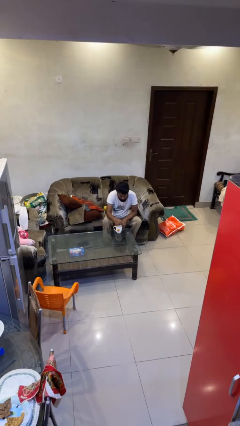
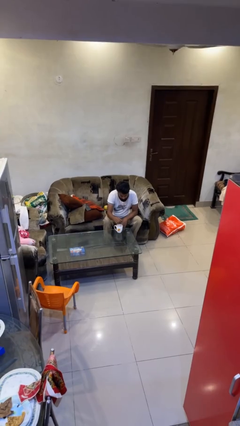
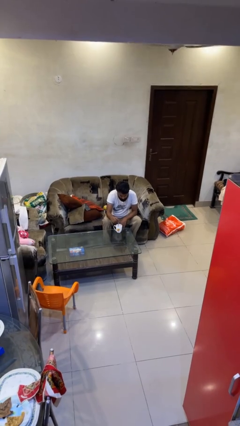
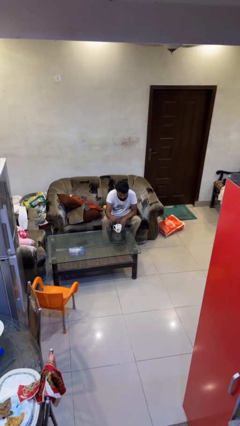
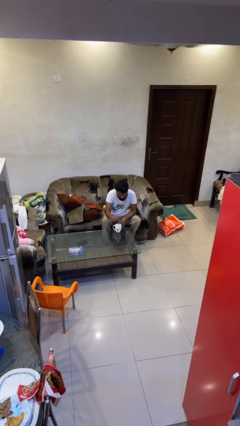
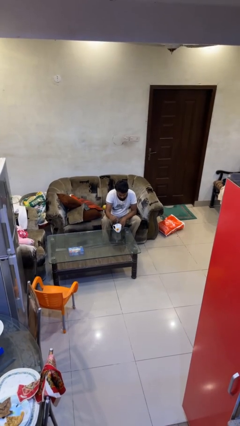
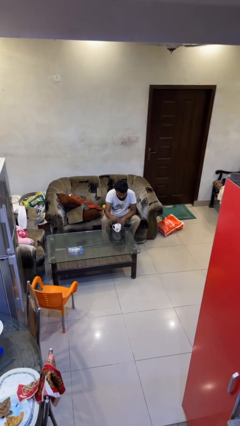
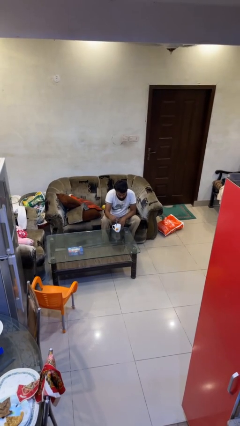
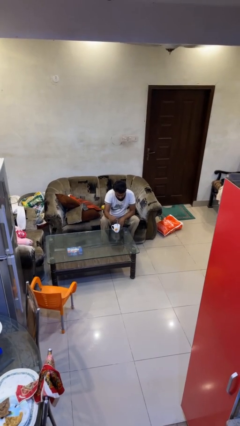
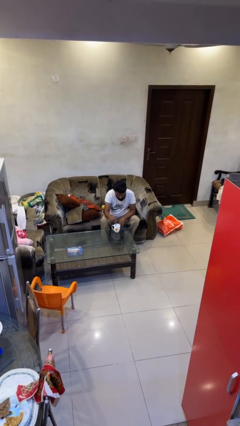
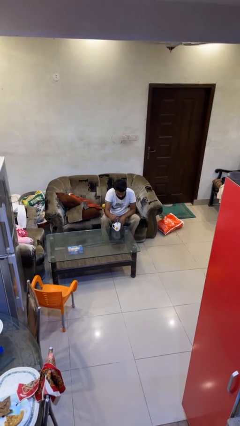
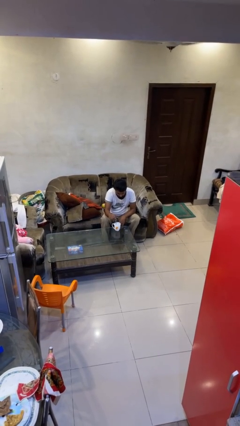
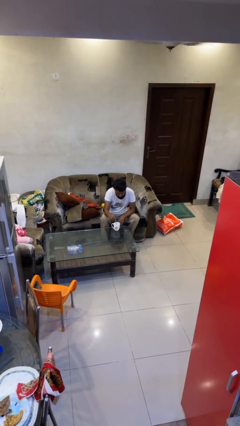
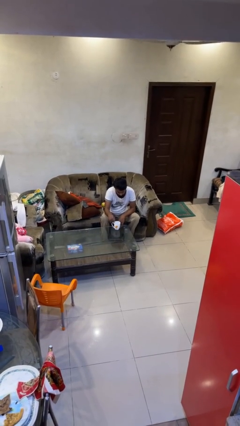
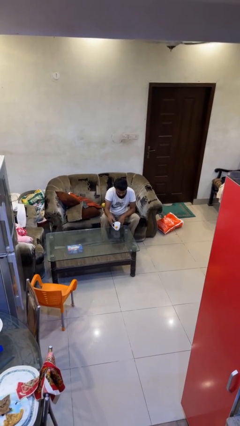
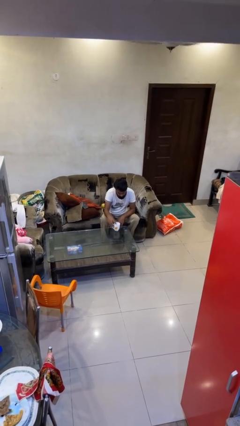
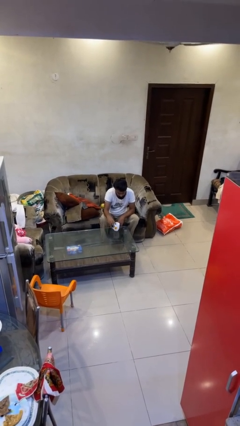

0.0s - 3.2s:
person stirs mug

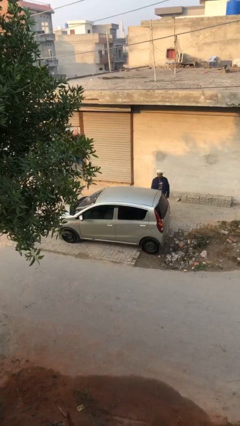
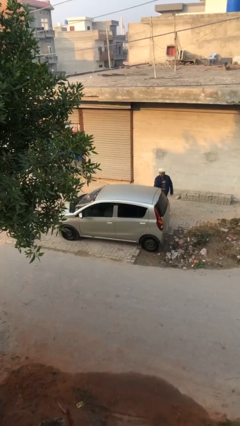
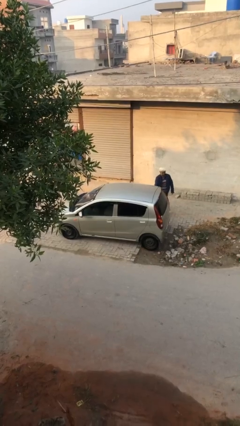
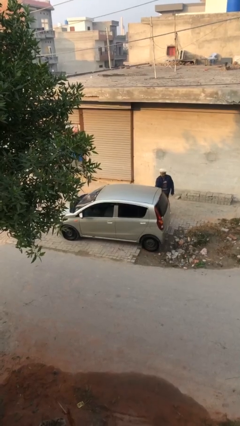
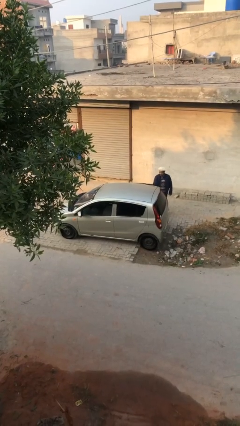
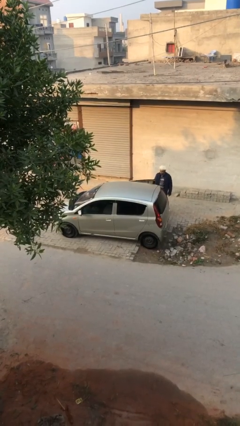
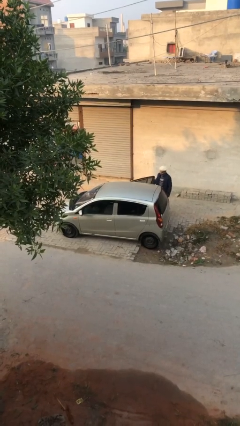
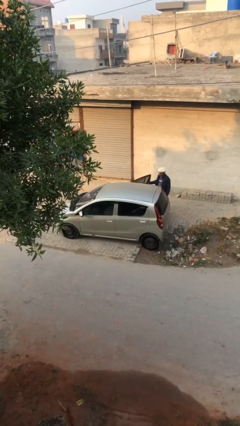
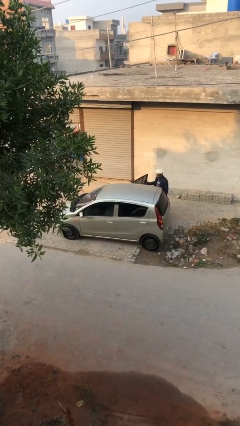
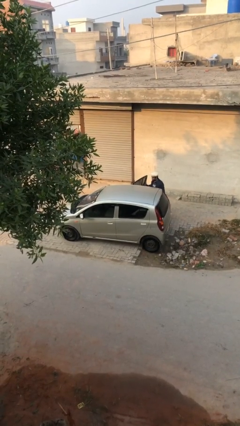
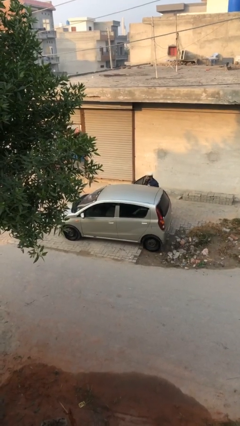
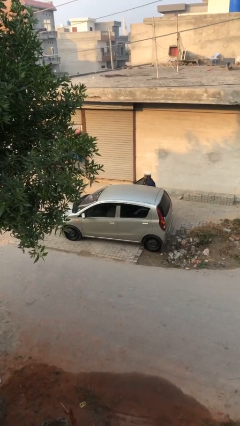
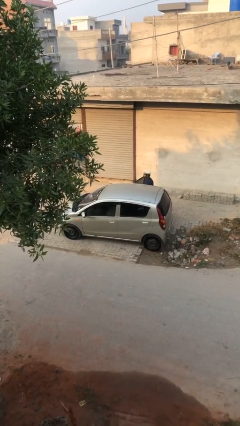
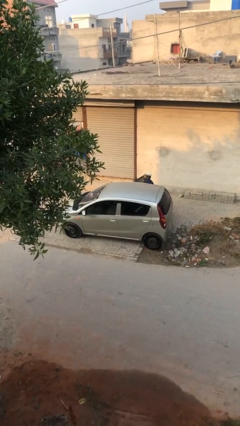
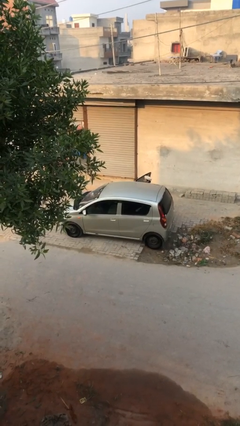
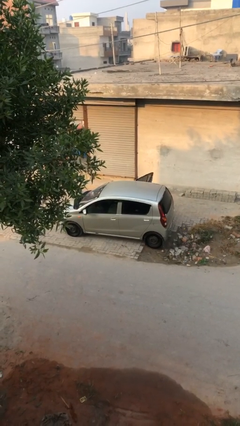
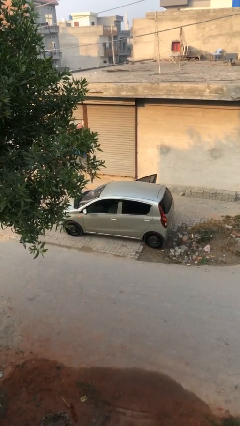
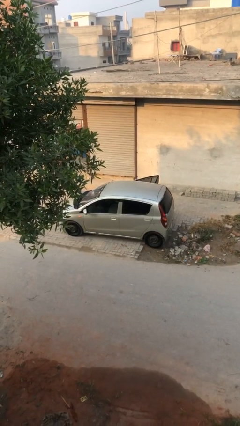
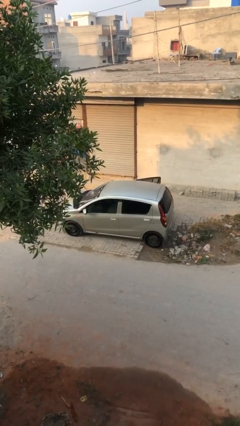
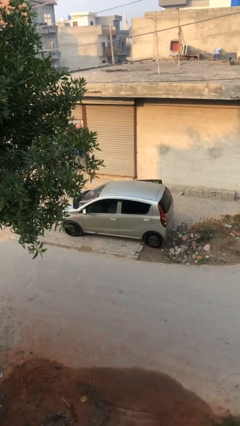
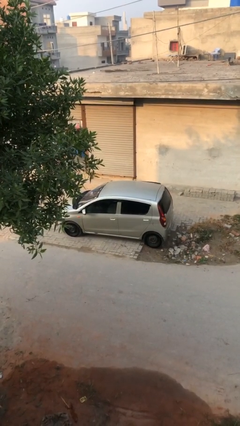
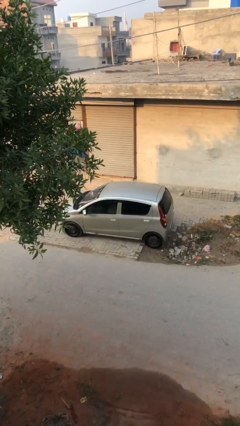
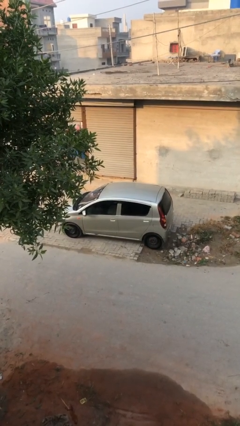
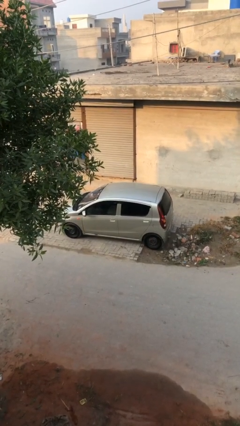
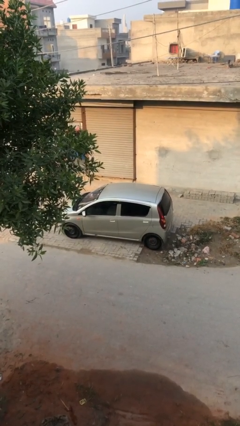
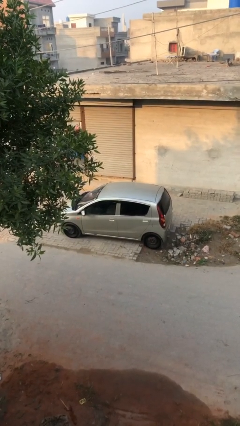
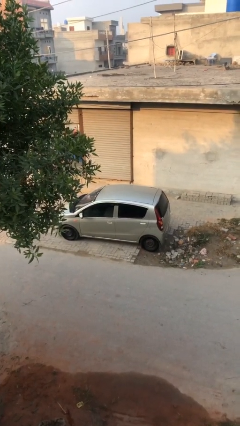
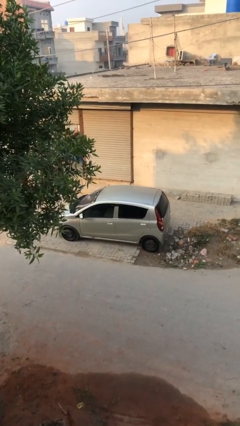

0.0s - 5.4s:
car picks up person

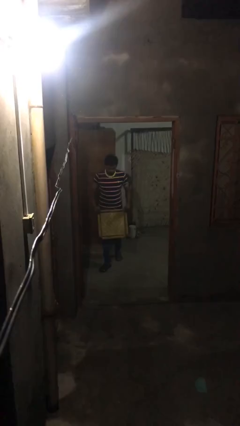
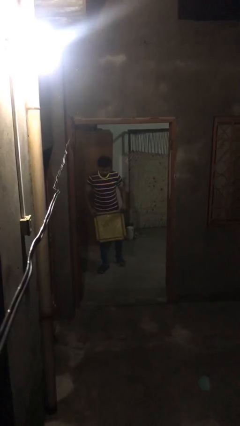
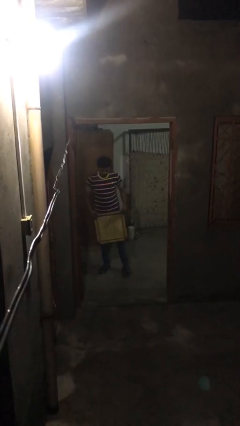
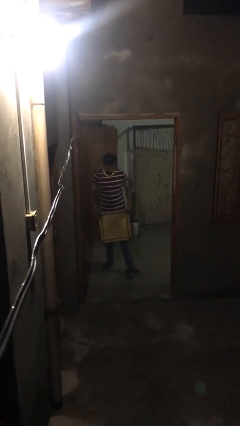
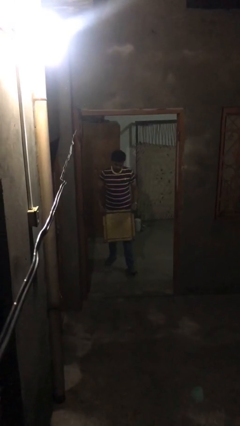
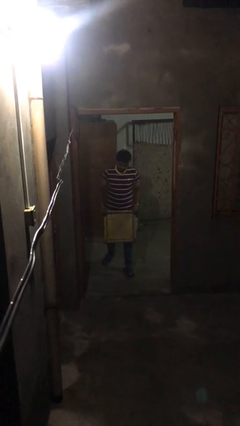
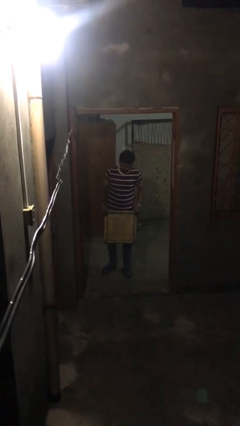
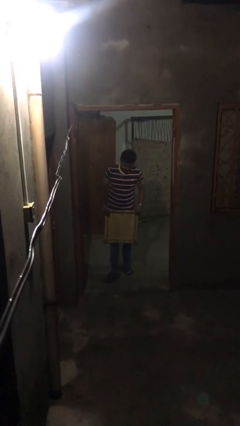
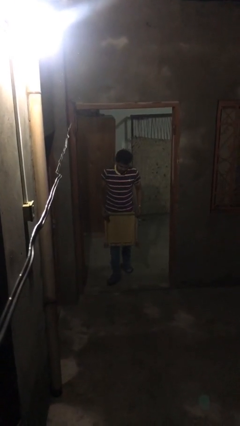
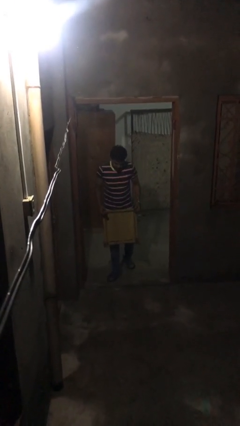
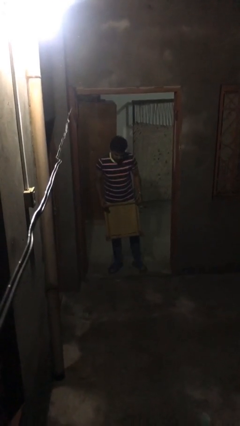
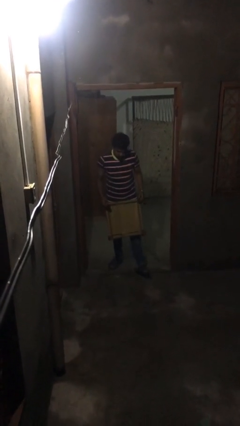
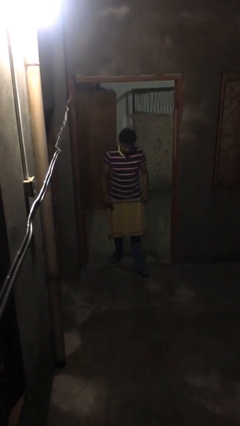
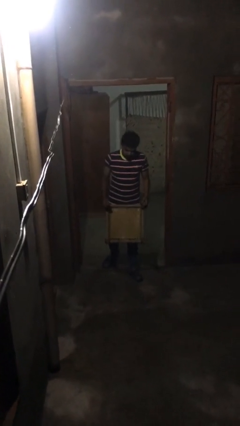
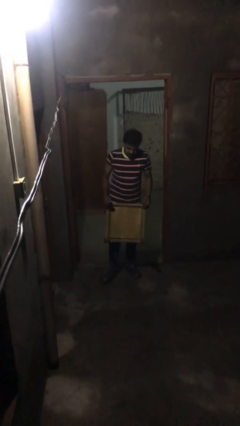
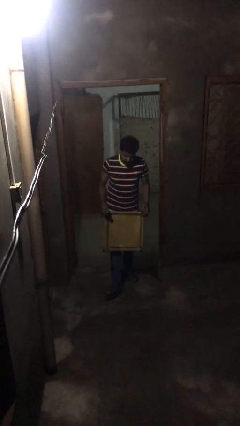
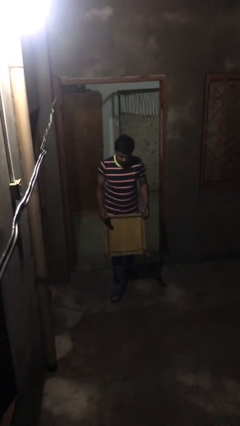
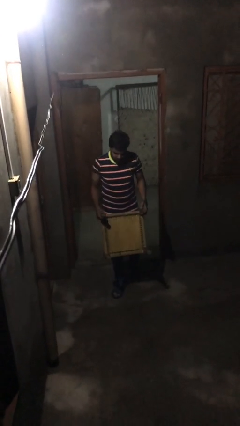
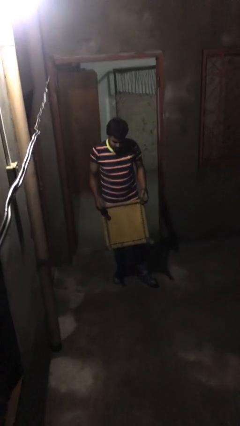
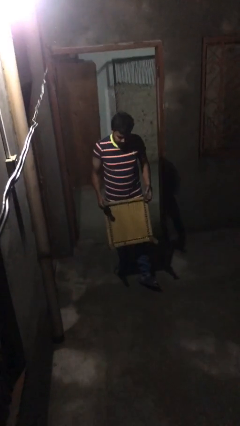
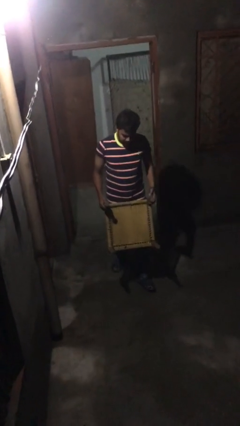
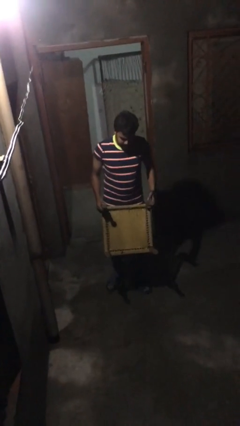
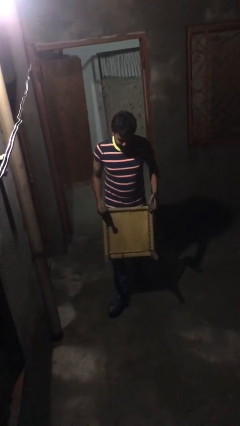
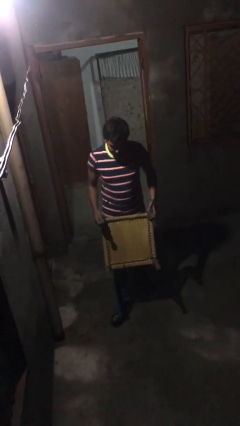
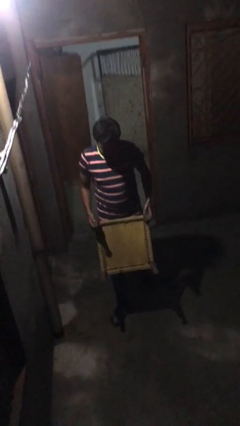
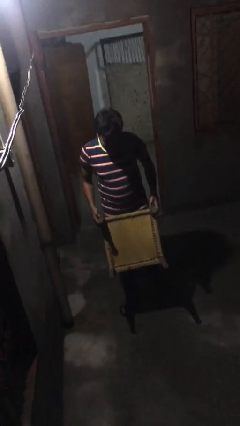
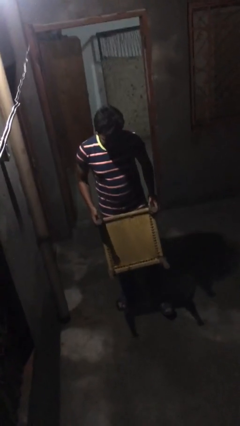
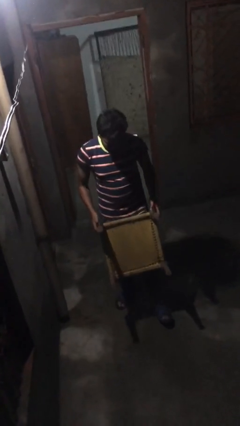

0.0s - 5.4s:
person carries heavy object

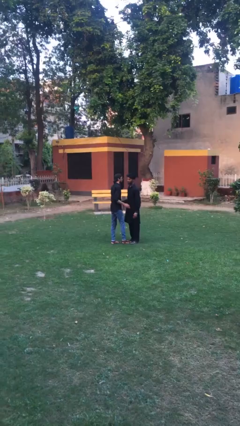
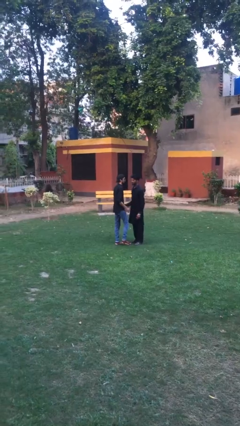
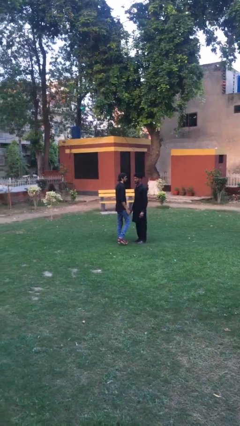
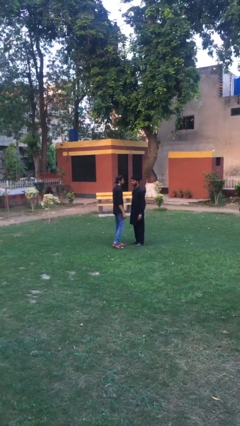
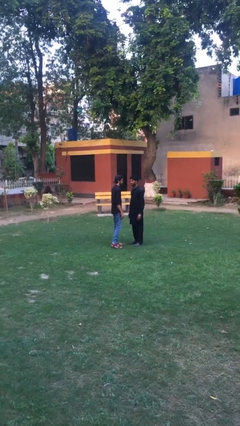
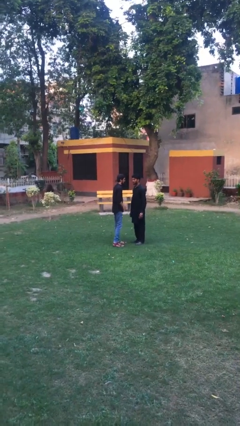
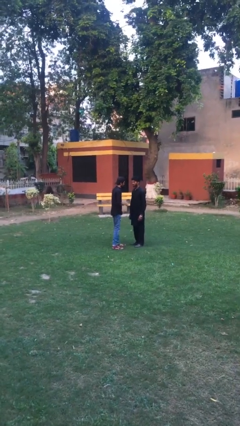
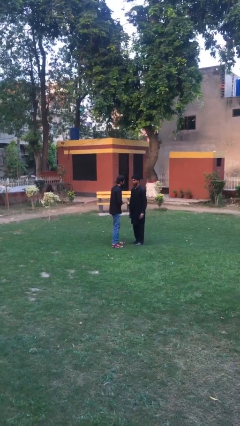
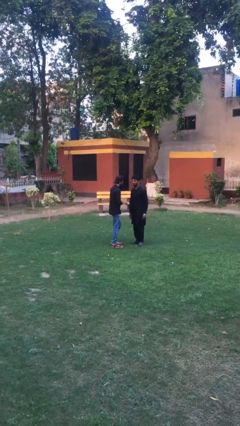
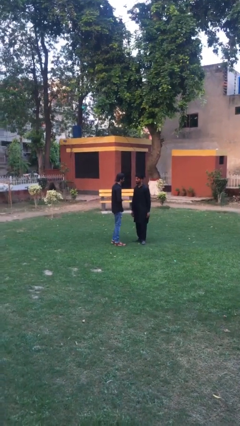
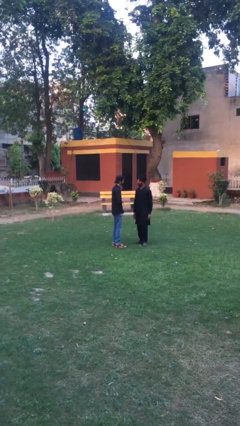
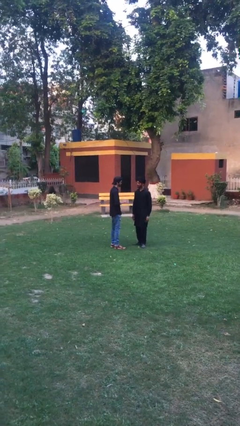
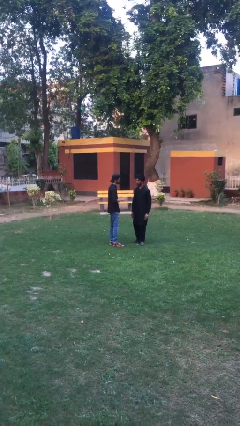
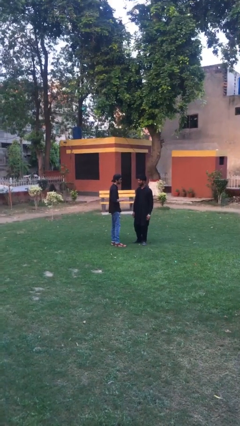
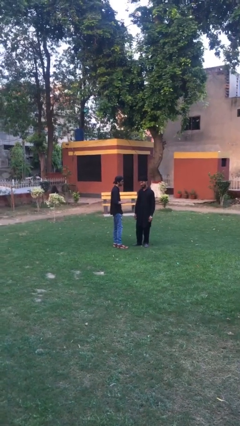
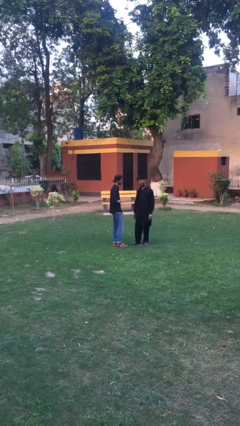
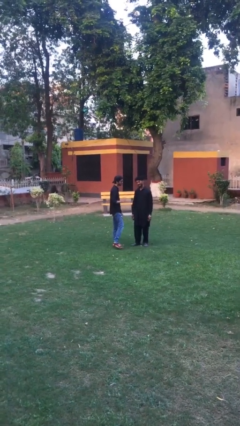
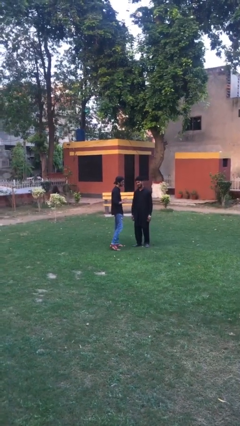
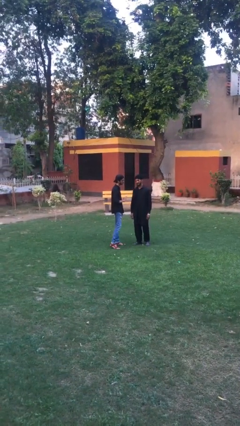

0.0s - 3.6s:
person talks to person
